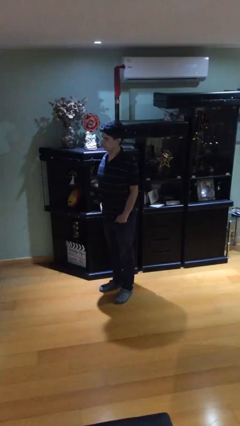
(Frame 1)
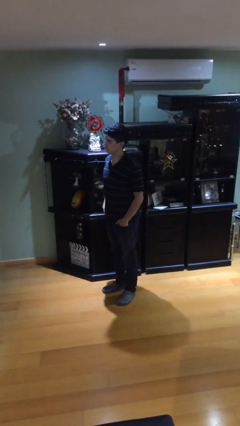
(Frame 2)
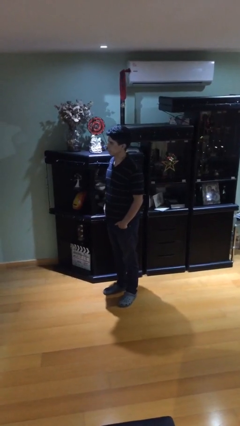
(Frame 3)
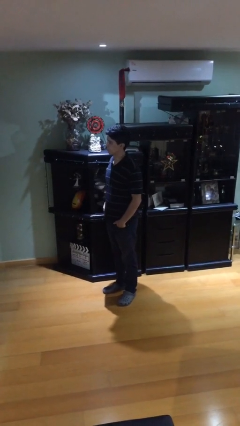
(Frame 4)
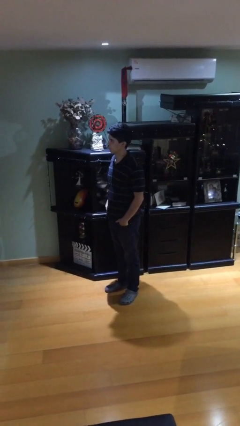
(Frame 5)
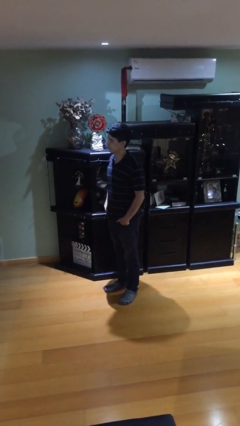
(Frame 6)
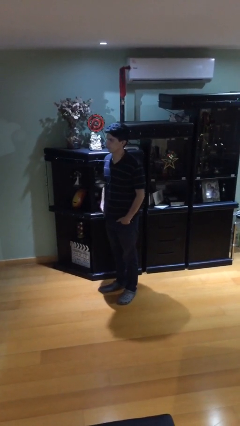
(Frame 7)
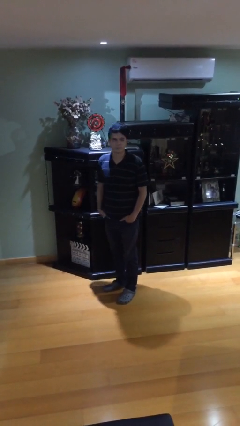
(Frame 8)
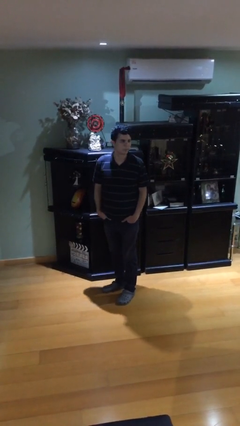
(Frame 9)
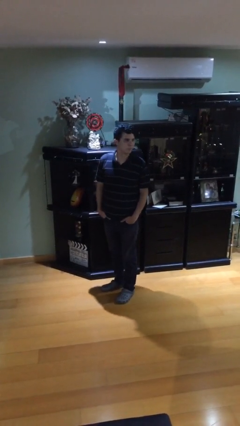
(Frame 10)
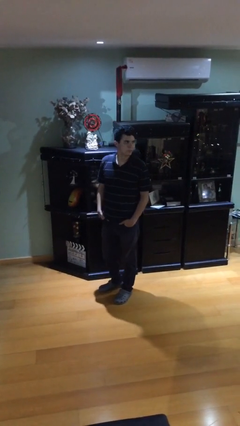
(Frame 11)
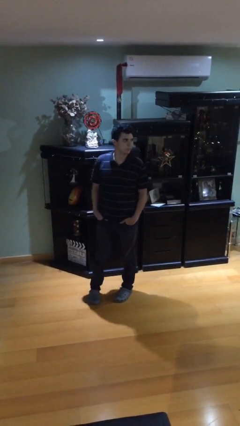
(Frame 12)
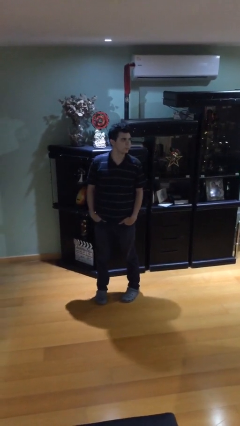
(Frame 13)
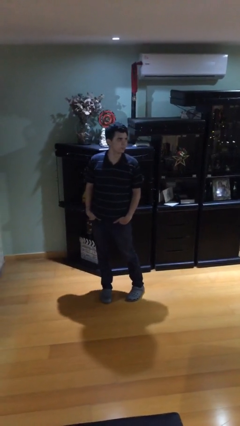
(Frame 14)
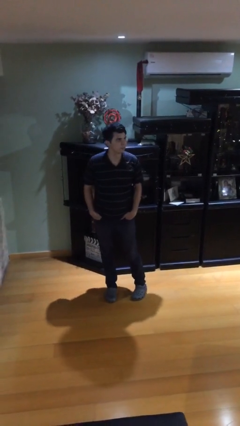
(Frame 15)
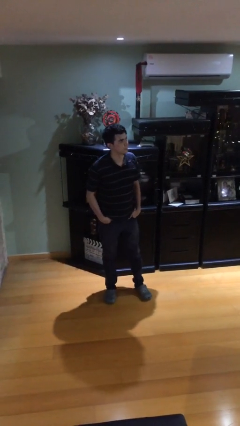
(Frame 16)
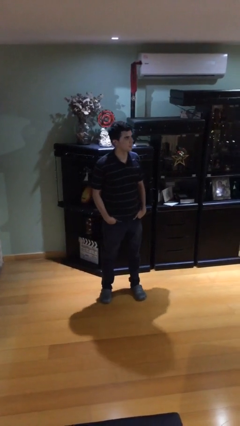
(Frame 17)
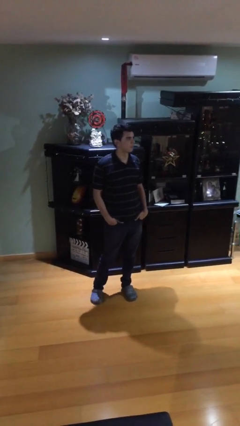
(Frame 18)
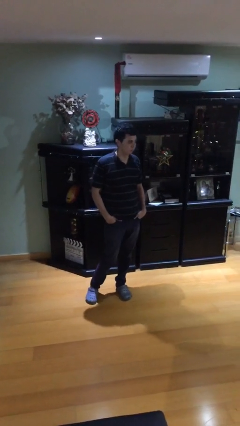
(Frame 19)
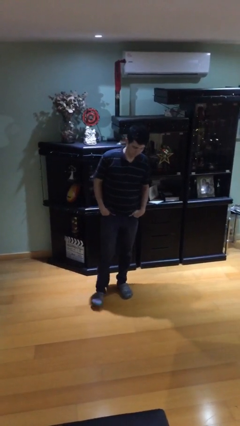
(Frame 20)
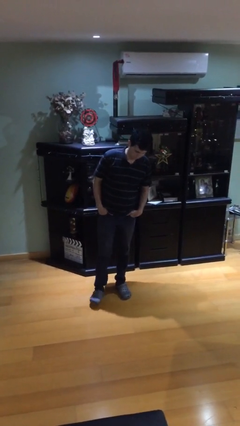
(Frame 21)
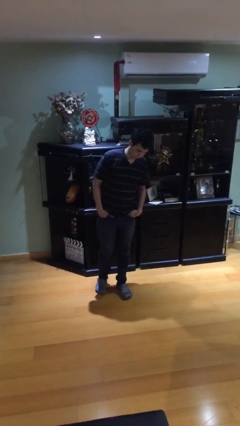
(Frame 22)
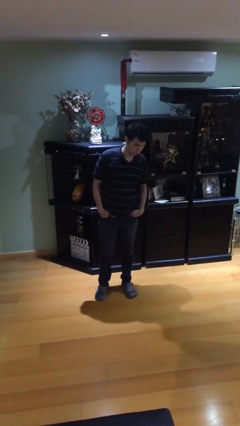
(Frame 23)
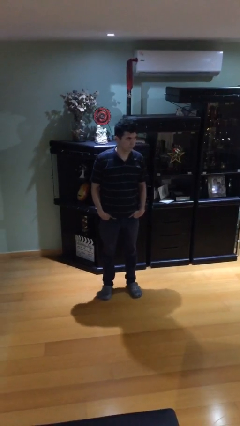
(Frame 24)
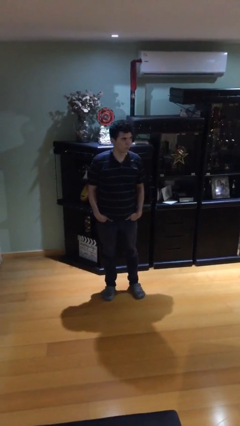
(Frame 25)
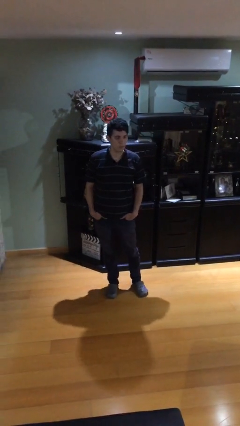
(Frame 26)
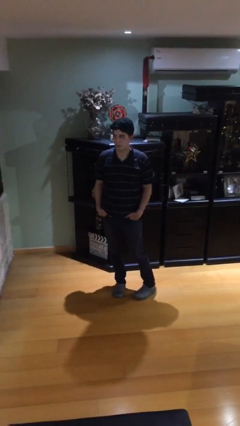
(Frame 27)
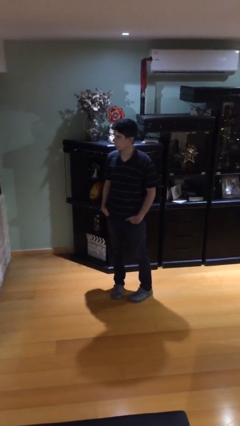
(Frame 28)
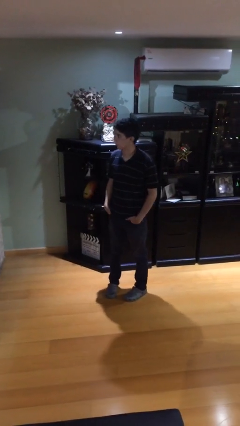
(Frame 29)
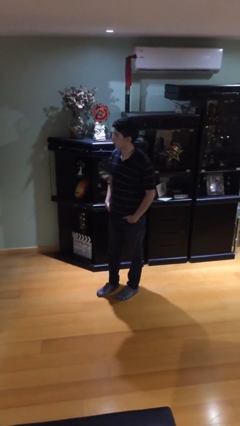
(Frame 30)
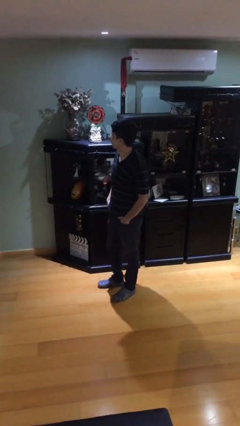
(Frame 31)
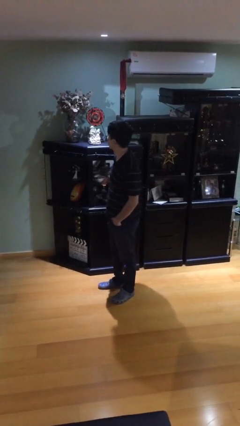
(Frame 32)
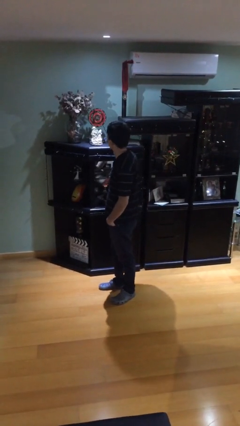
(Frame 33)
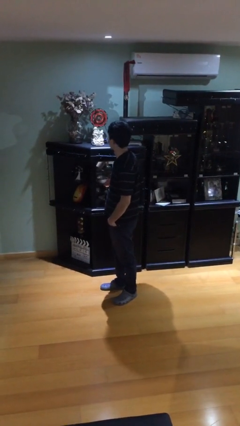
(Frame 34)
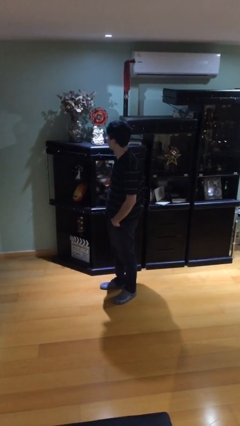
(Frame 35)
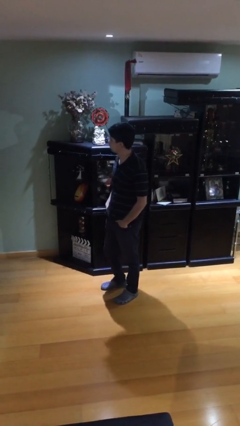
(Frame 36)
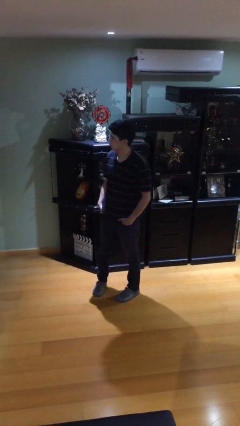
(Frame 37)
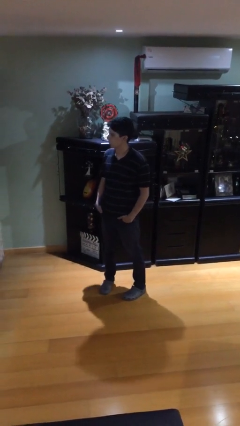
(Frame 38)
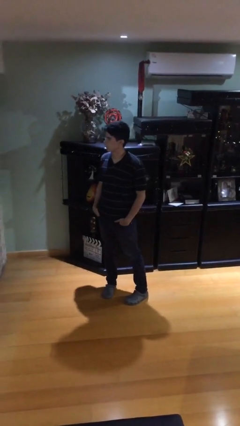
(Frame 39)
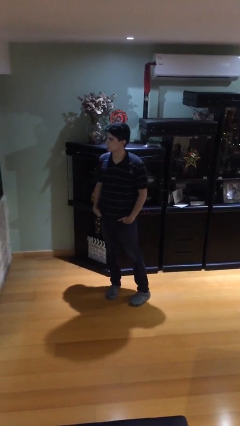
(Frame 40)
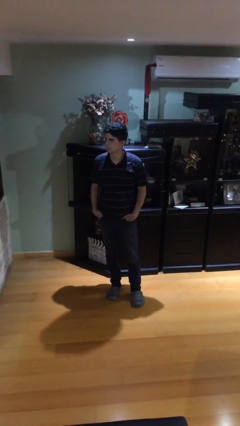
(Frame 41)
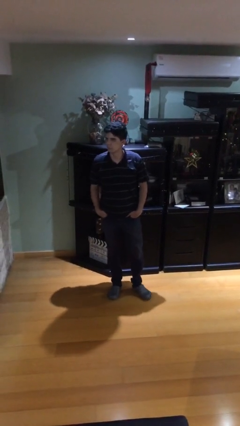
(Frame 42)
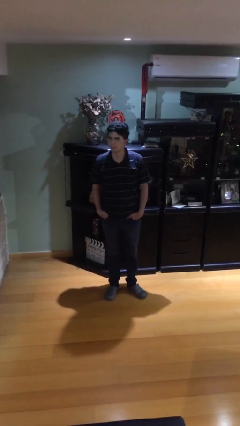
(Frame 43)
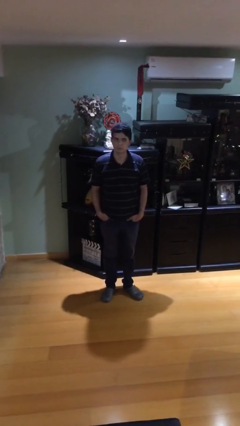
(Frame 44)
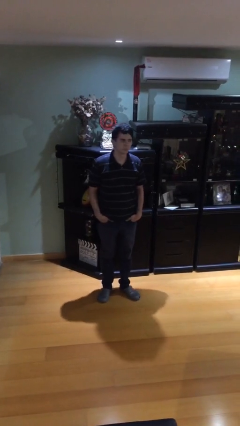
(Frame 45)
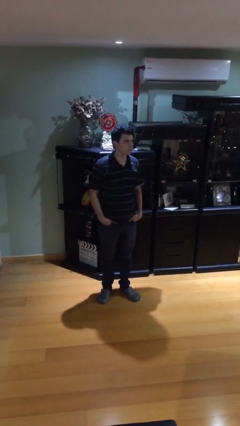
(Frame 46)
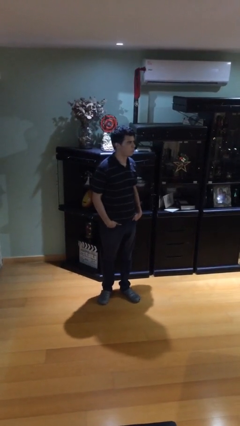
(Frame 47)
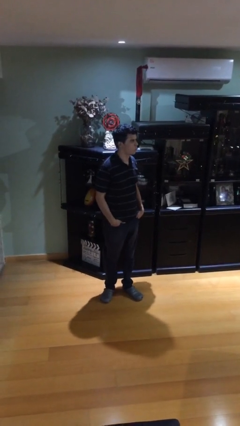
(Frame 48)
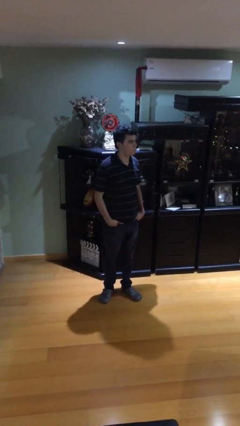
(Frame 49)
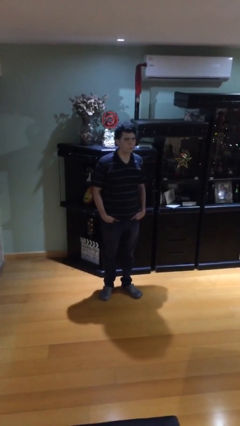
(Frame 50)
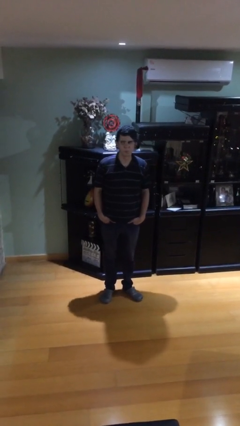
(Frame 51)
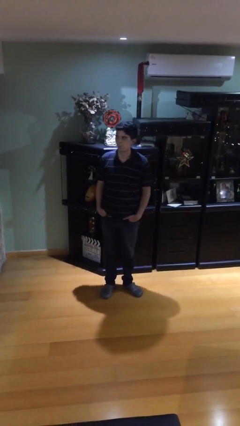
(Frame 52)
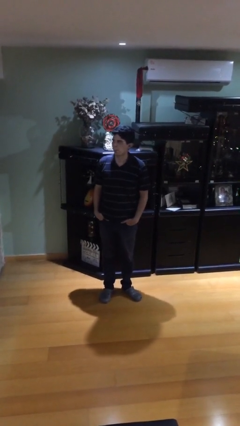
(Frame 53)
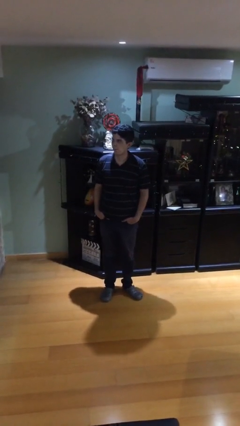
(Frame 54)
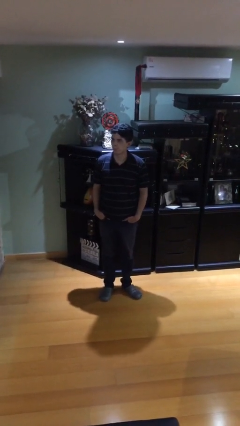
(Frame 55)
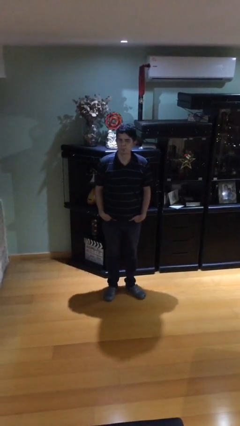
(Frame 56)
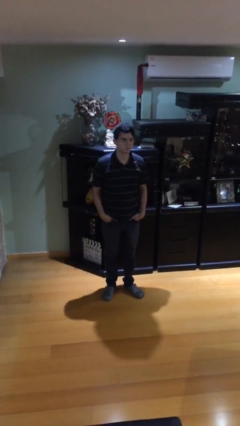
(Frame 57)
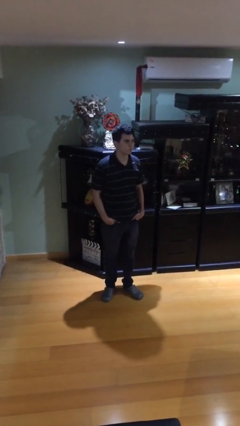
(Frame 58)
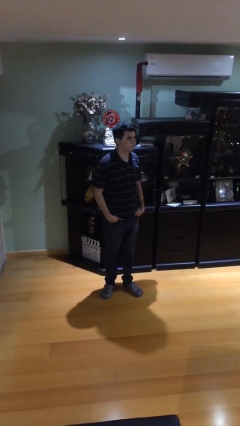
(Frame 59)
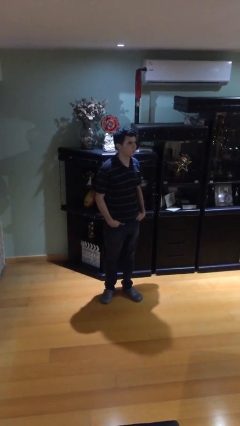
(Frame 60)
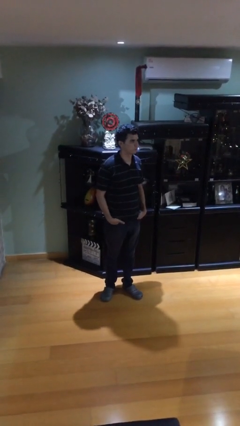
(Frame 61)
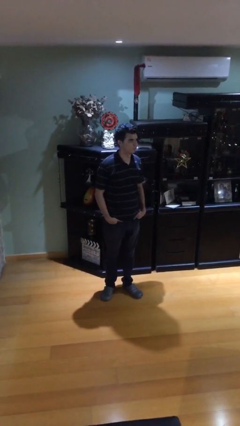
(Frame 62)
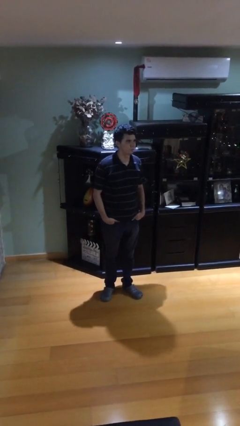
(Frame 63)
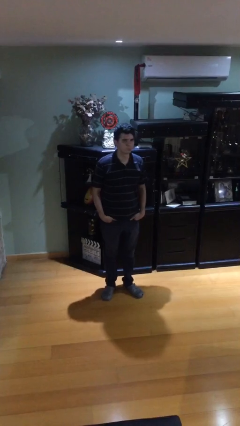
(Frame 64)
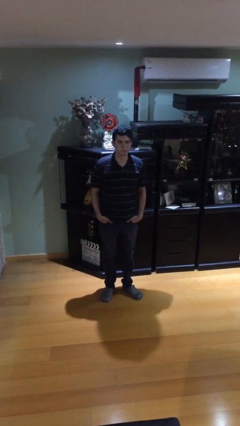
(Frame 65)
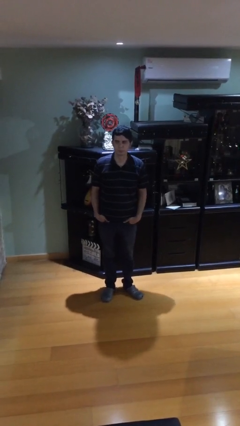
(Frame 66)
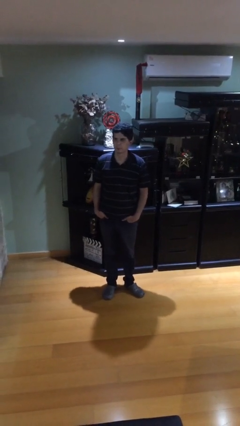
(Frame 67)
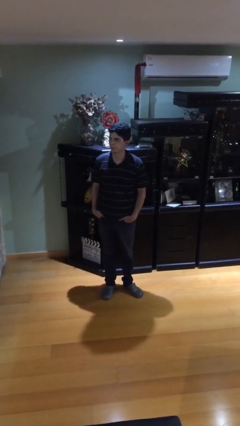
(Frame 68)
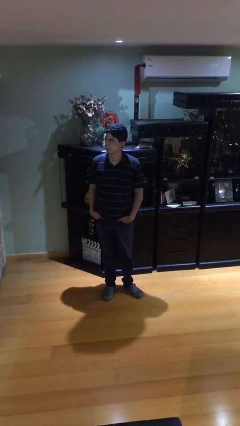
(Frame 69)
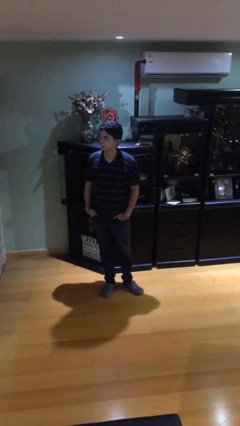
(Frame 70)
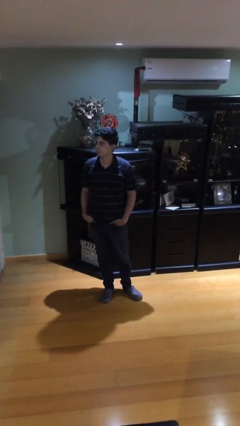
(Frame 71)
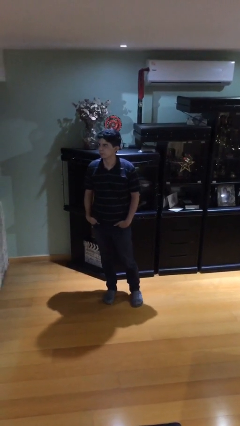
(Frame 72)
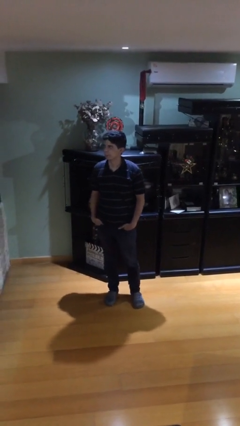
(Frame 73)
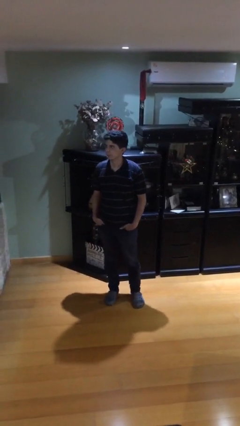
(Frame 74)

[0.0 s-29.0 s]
person walks

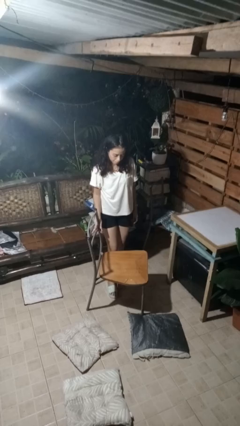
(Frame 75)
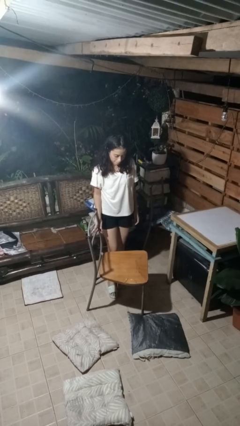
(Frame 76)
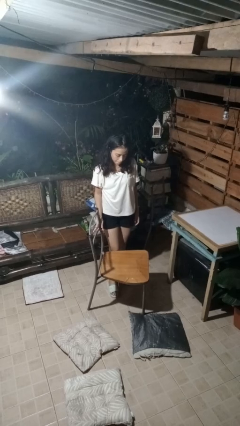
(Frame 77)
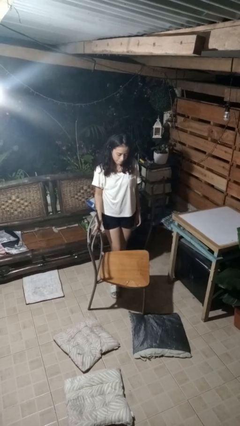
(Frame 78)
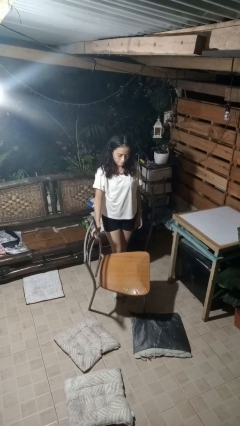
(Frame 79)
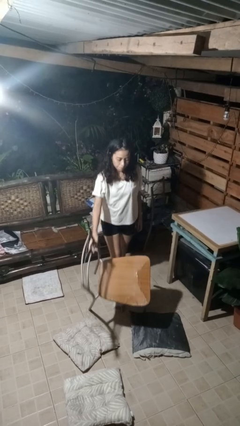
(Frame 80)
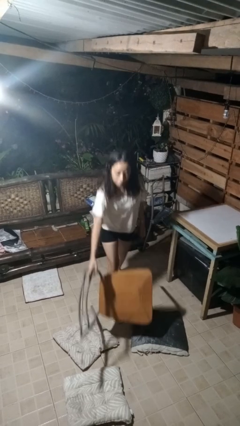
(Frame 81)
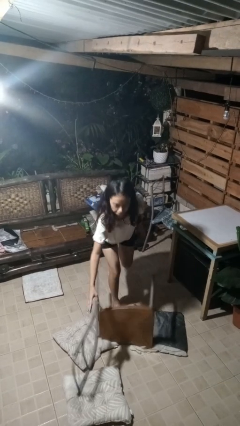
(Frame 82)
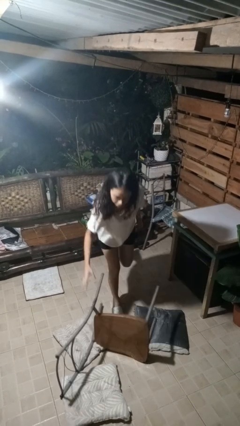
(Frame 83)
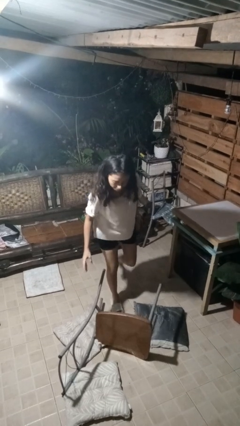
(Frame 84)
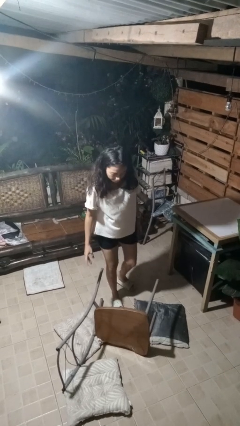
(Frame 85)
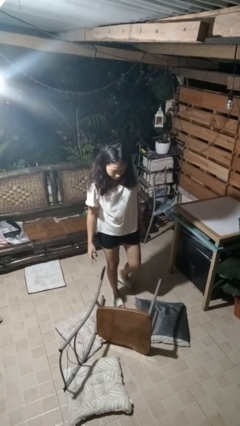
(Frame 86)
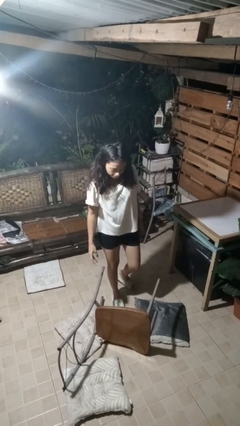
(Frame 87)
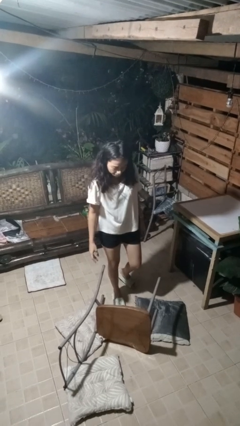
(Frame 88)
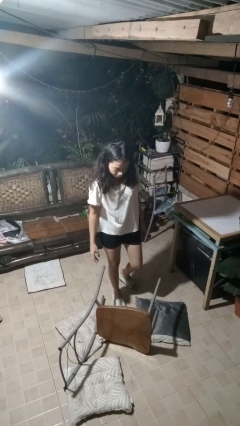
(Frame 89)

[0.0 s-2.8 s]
person knocks over furniture

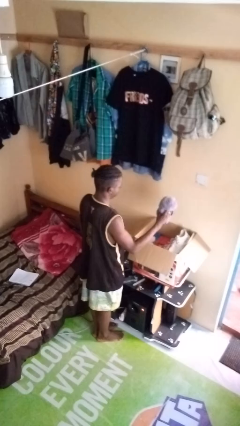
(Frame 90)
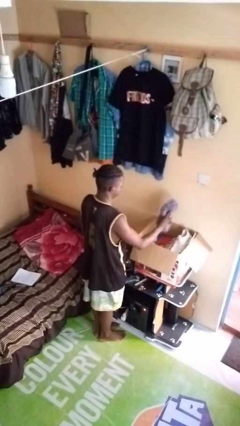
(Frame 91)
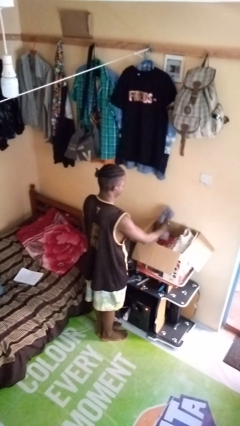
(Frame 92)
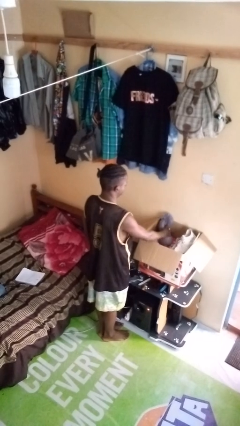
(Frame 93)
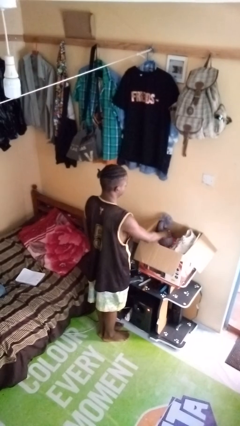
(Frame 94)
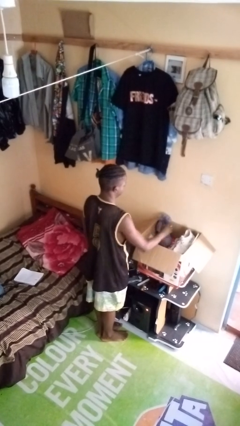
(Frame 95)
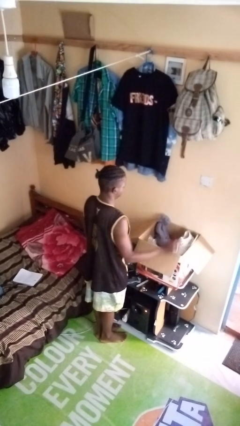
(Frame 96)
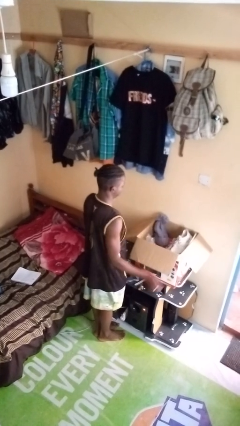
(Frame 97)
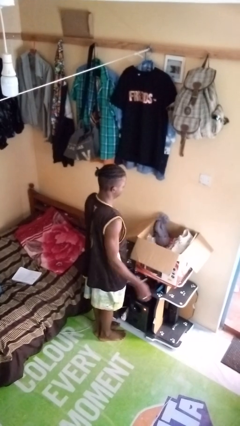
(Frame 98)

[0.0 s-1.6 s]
person puts object into box
